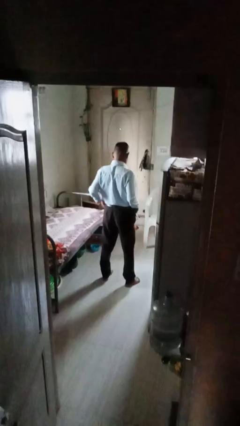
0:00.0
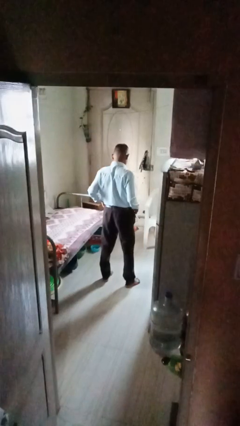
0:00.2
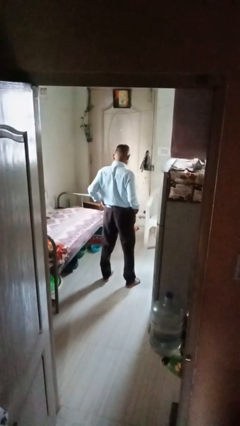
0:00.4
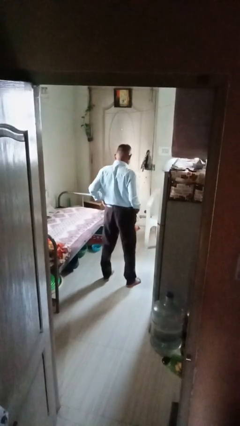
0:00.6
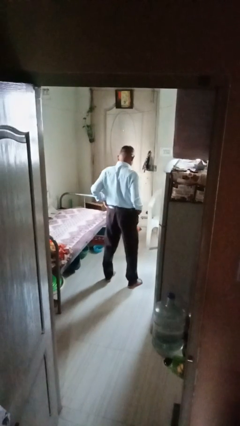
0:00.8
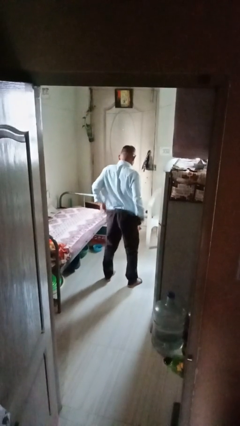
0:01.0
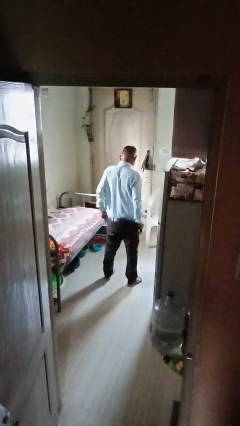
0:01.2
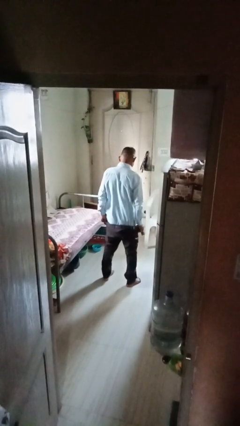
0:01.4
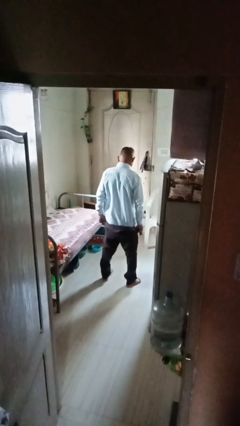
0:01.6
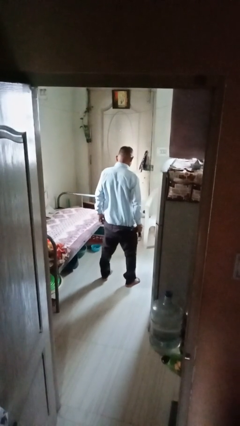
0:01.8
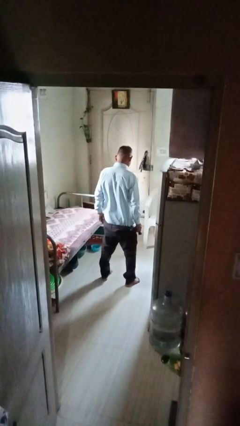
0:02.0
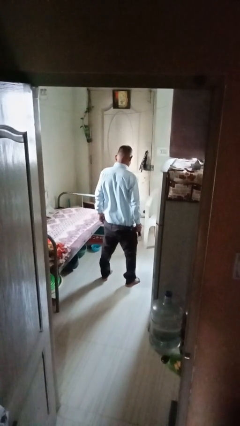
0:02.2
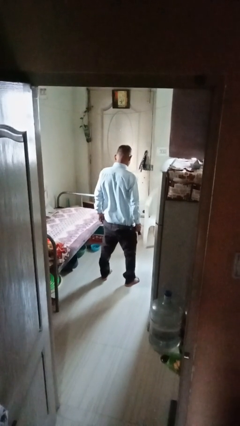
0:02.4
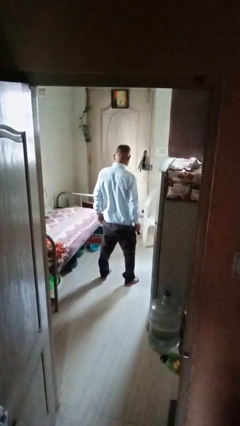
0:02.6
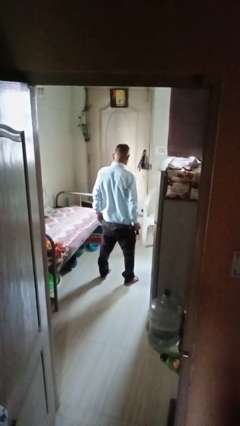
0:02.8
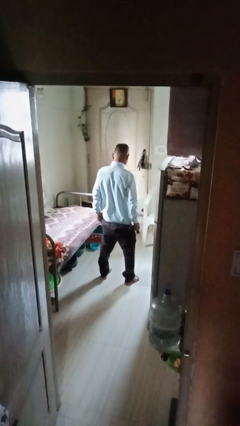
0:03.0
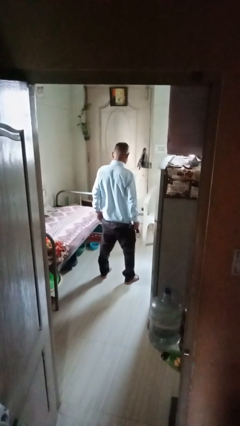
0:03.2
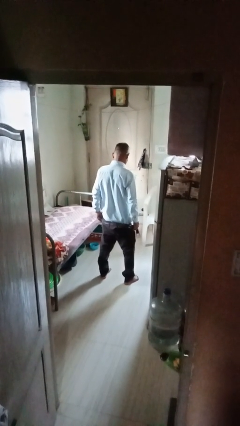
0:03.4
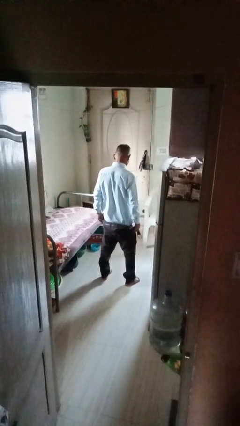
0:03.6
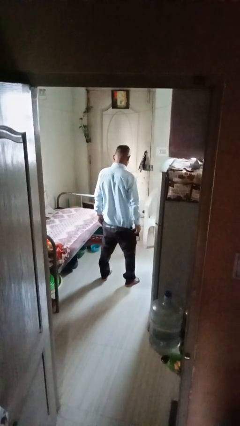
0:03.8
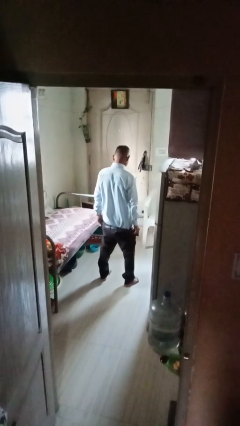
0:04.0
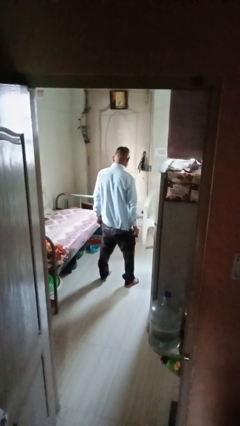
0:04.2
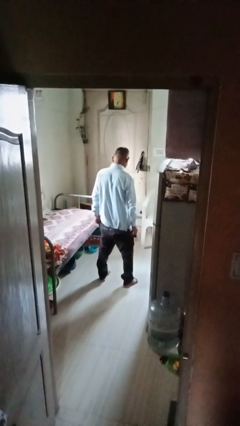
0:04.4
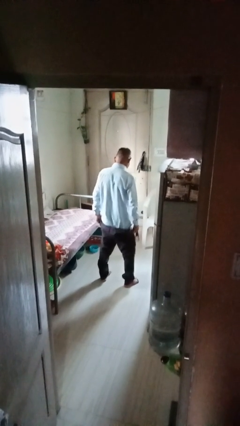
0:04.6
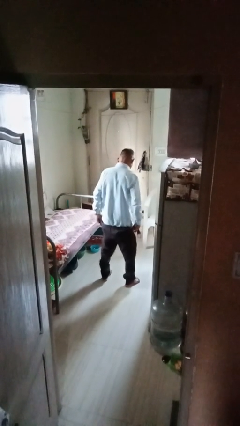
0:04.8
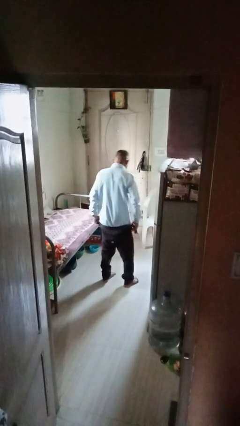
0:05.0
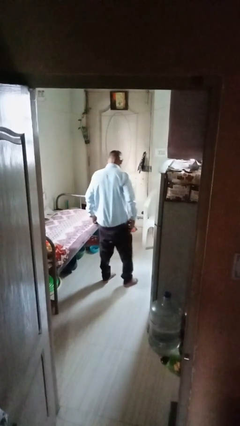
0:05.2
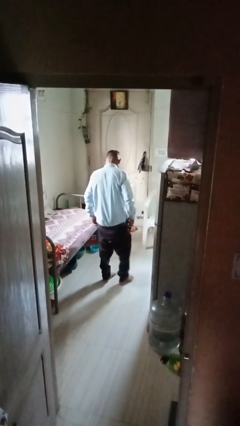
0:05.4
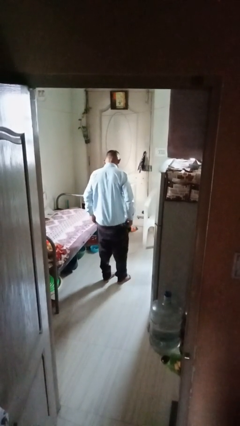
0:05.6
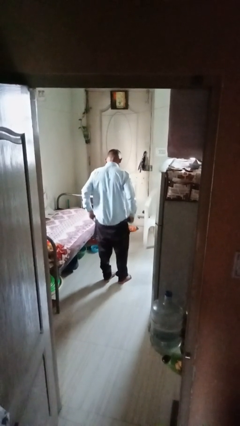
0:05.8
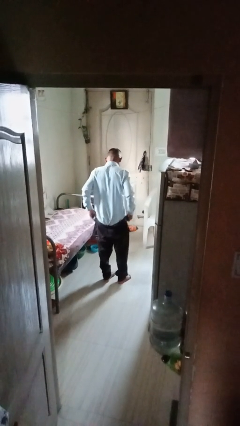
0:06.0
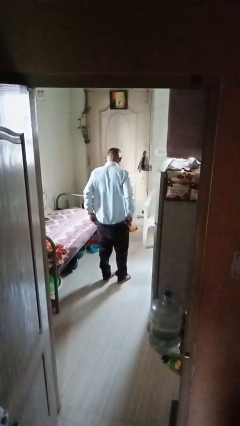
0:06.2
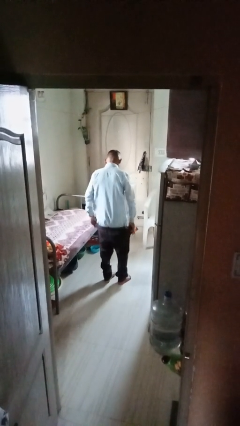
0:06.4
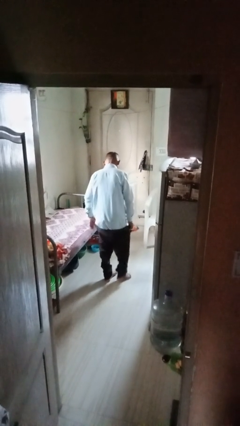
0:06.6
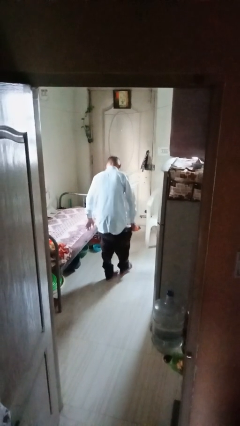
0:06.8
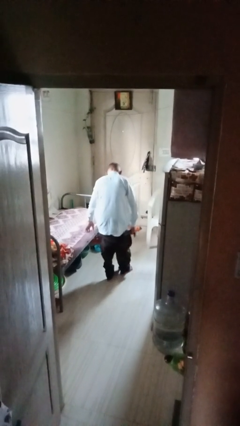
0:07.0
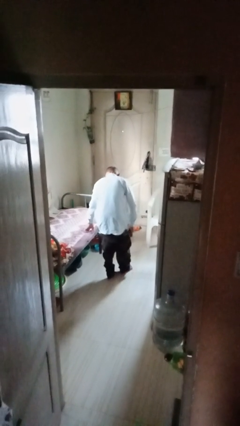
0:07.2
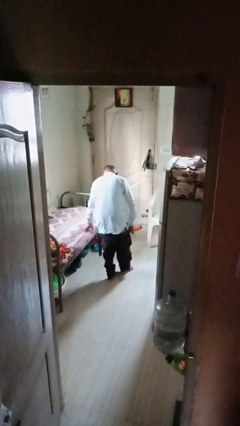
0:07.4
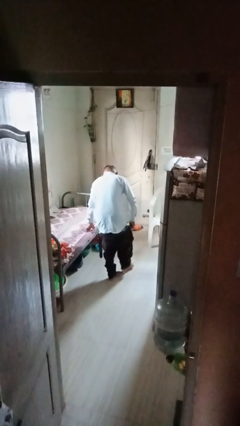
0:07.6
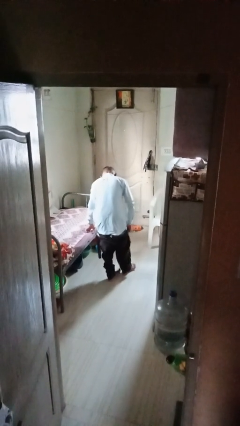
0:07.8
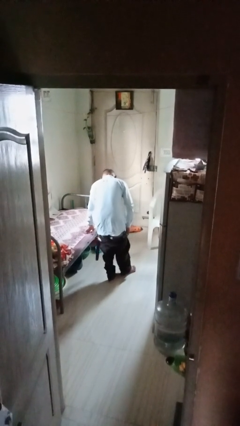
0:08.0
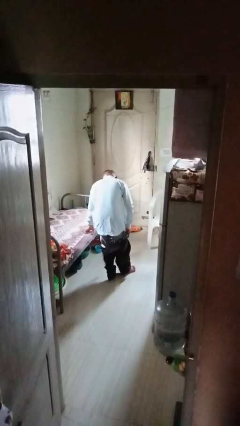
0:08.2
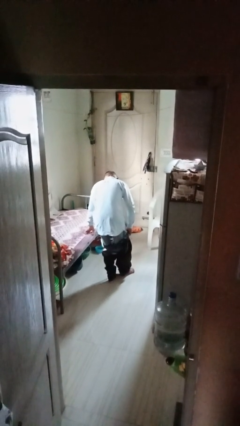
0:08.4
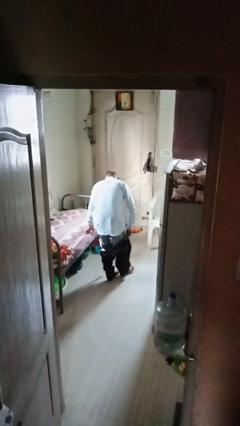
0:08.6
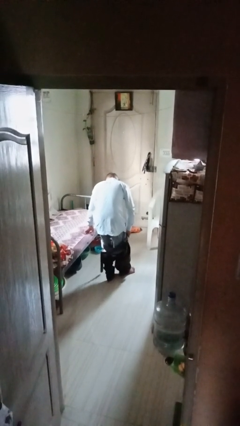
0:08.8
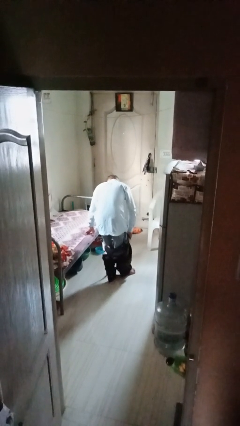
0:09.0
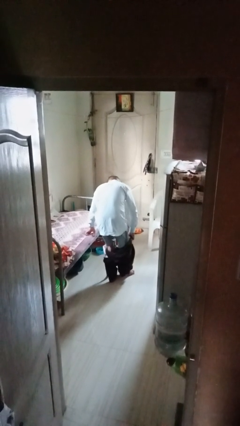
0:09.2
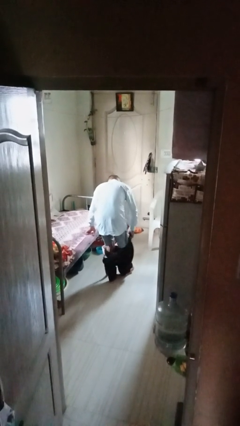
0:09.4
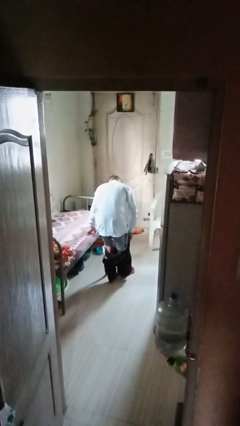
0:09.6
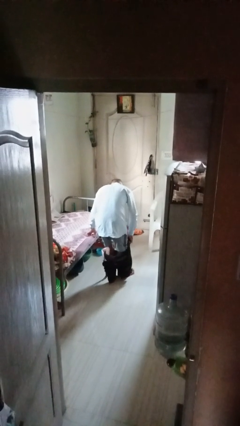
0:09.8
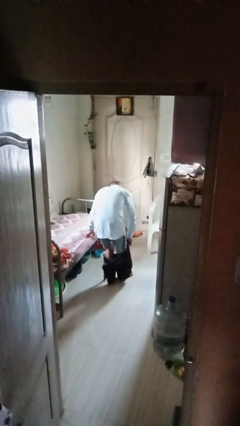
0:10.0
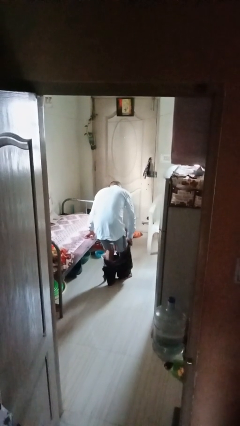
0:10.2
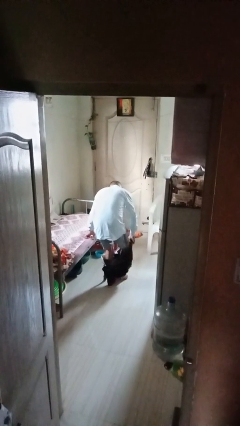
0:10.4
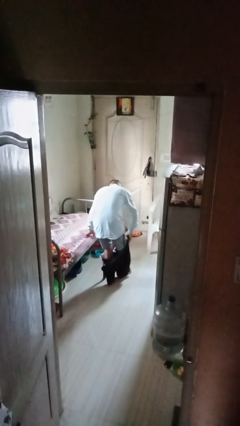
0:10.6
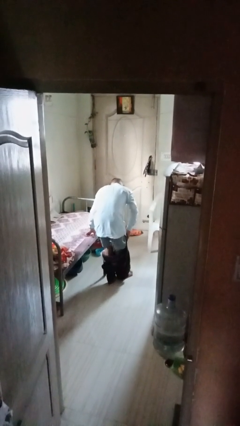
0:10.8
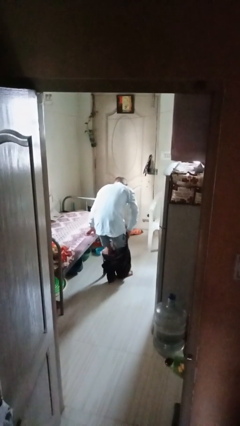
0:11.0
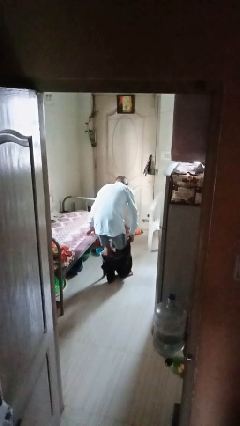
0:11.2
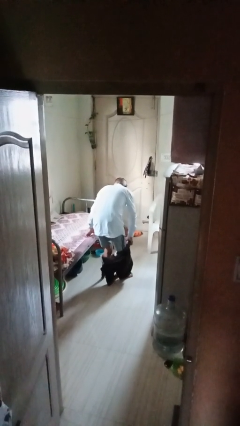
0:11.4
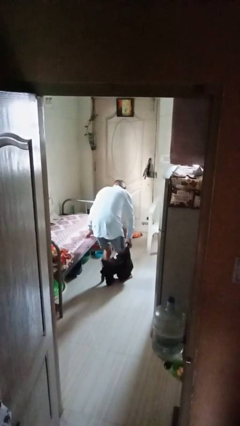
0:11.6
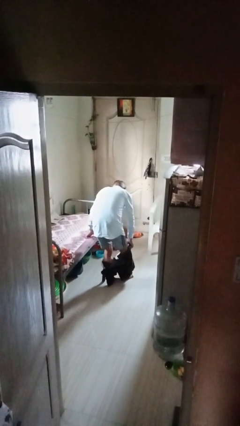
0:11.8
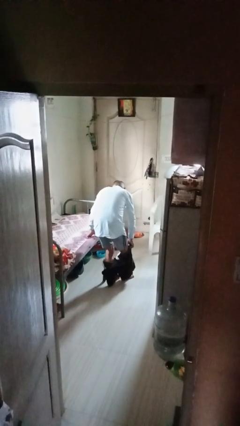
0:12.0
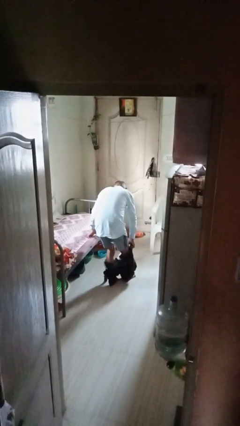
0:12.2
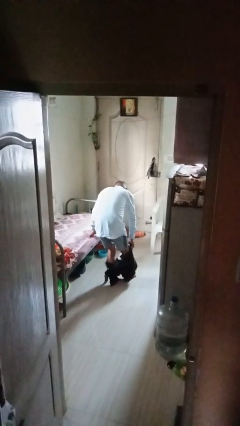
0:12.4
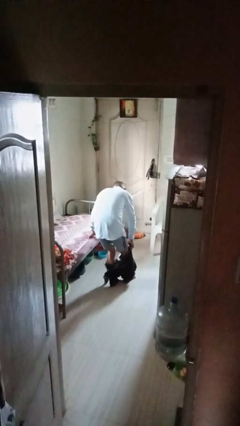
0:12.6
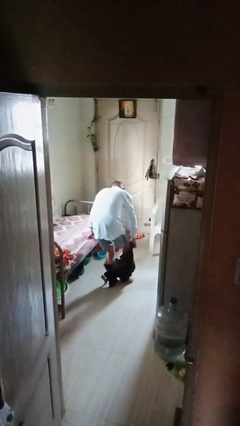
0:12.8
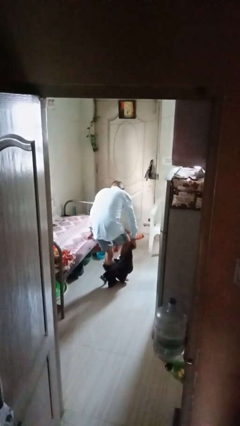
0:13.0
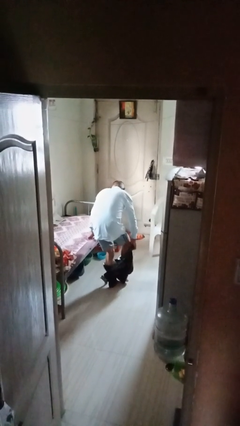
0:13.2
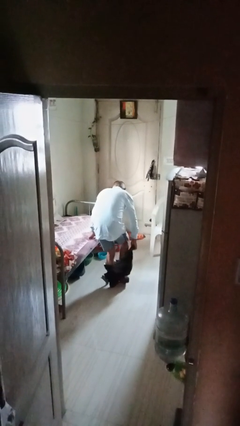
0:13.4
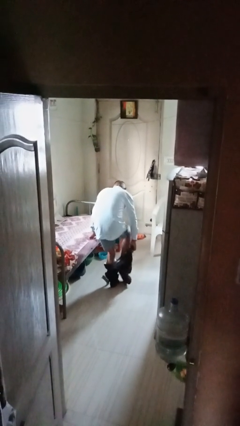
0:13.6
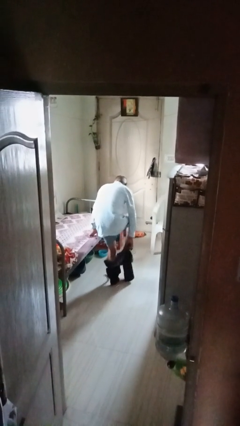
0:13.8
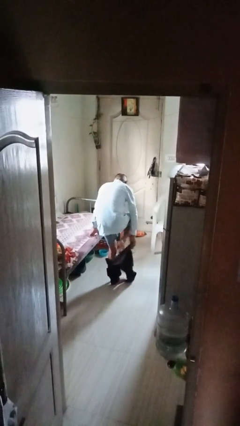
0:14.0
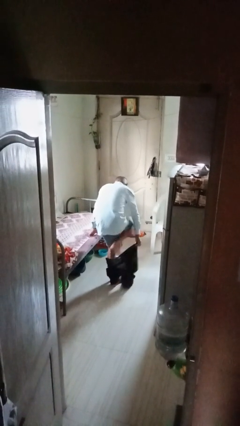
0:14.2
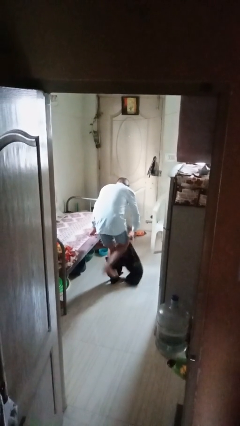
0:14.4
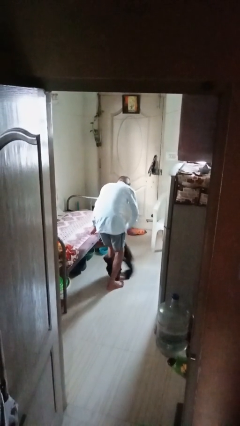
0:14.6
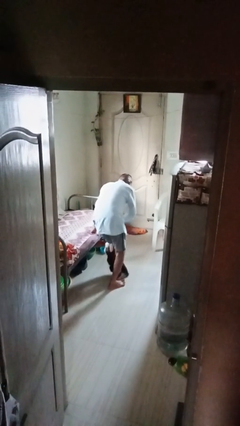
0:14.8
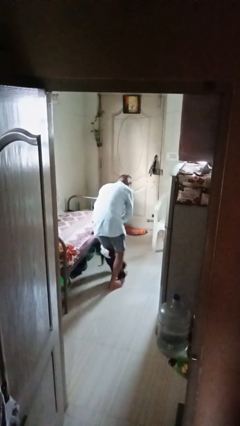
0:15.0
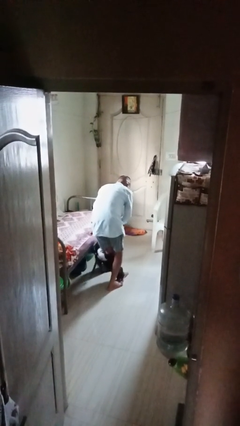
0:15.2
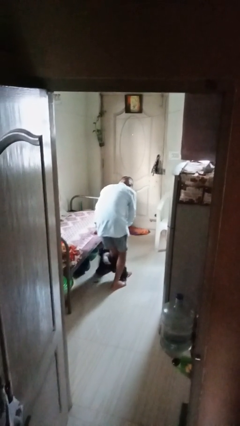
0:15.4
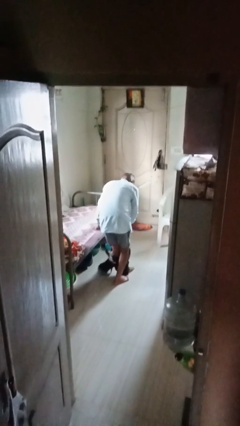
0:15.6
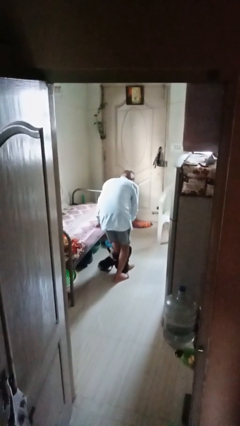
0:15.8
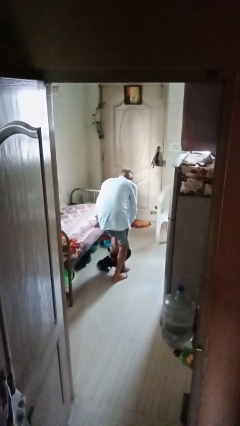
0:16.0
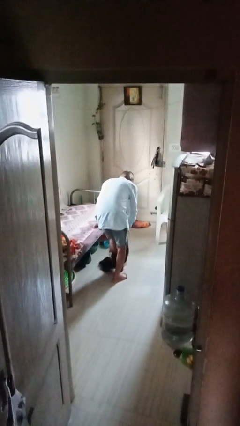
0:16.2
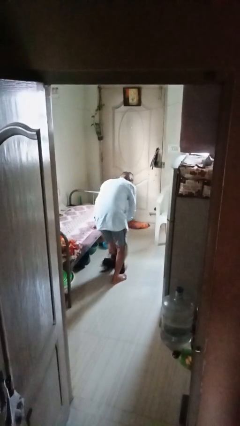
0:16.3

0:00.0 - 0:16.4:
person takes off pants

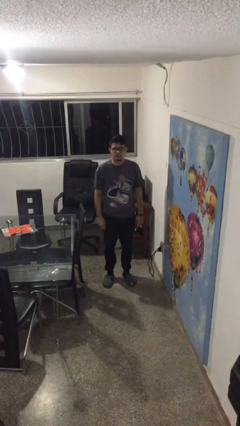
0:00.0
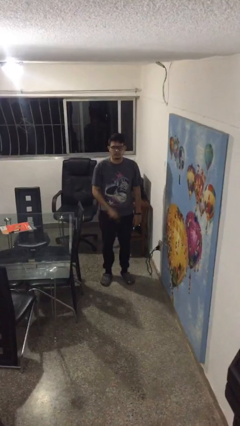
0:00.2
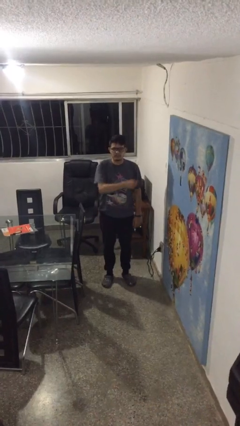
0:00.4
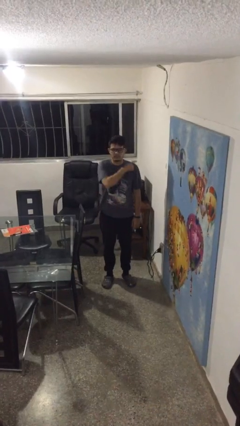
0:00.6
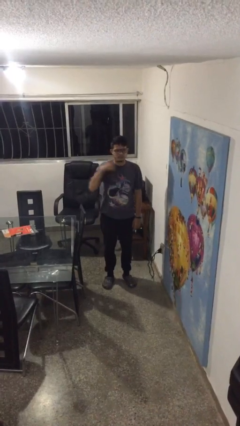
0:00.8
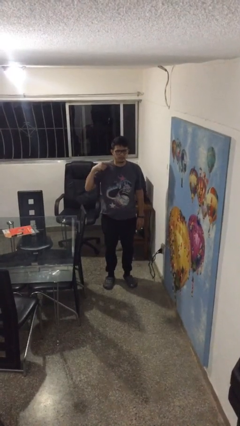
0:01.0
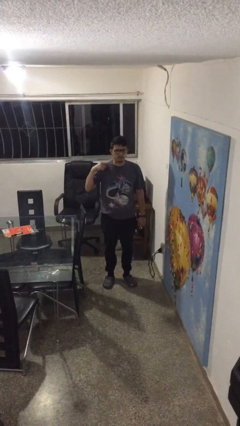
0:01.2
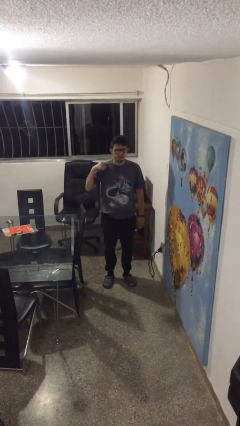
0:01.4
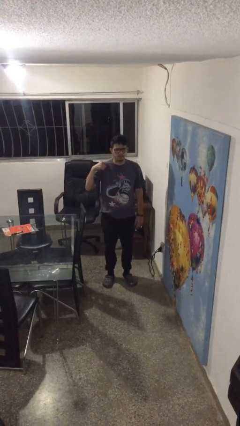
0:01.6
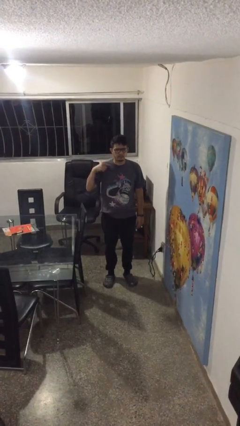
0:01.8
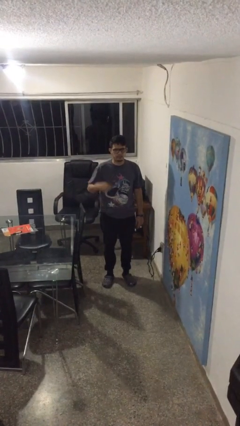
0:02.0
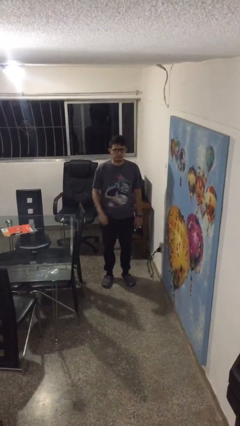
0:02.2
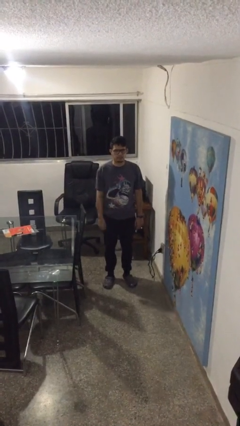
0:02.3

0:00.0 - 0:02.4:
person gestures cut
